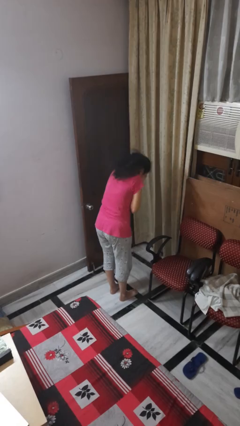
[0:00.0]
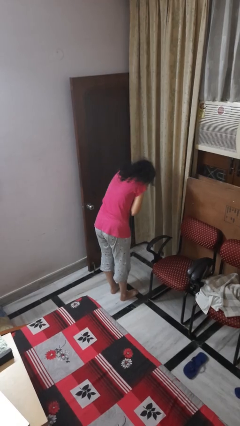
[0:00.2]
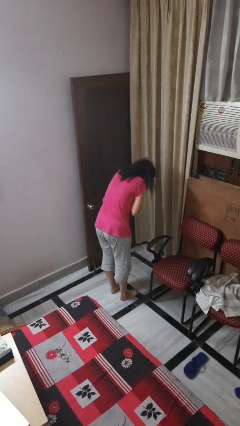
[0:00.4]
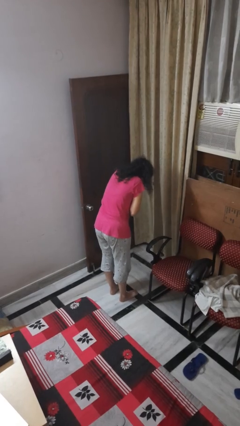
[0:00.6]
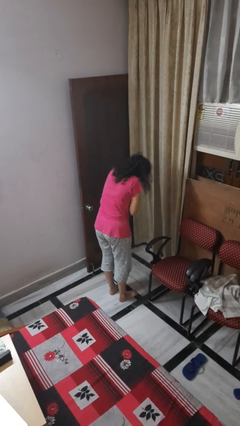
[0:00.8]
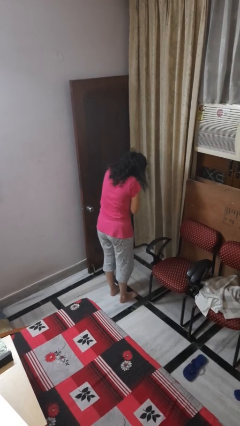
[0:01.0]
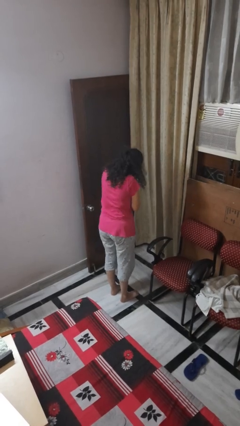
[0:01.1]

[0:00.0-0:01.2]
person sneezes into hand

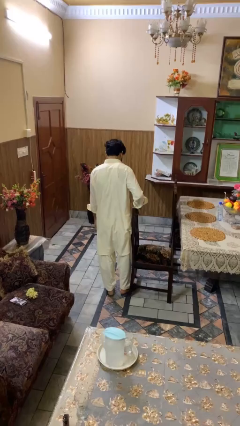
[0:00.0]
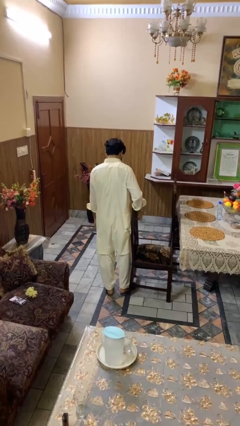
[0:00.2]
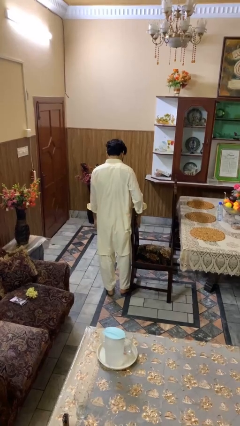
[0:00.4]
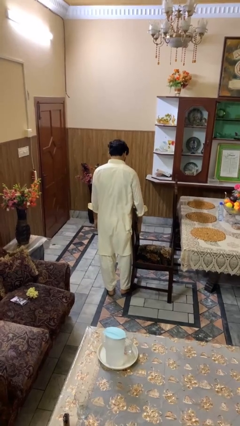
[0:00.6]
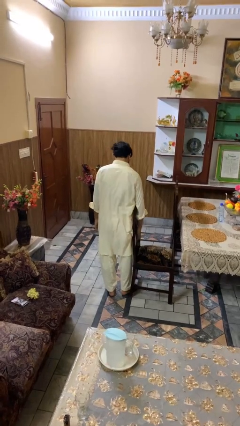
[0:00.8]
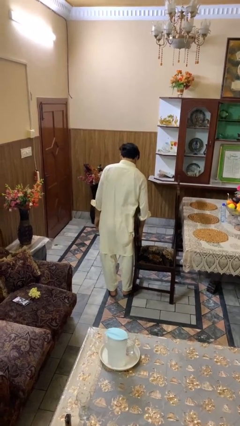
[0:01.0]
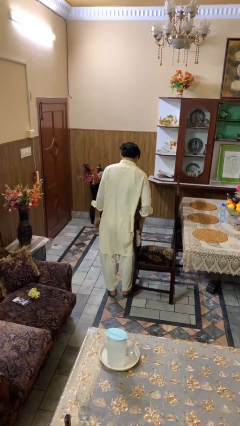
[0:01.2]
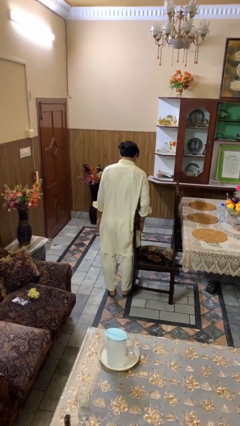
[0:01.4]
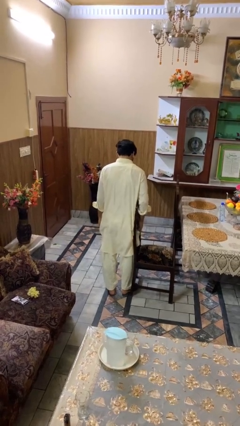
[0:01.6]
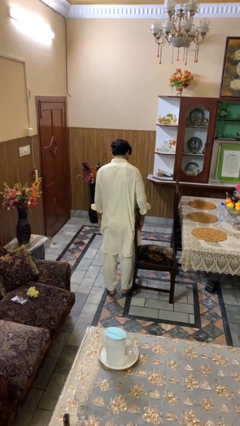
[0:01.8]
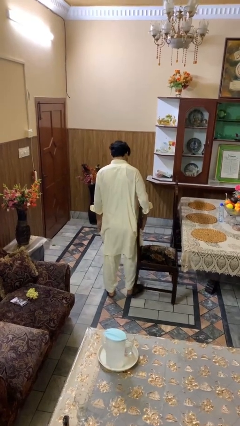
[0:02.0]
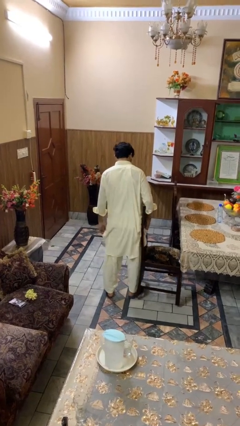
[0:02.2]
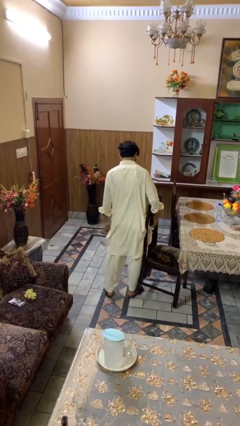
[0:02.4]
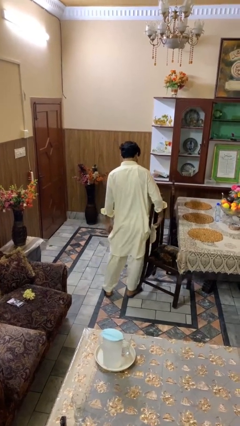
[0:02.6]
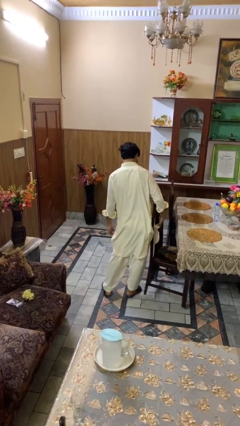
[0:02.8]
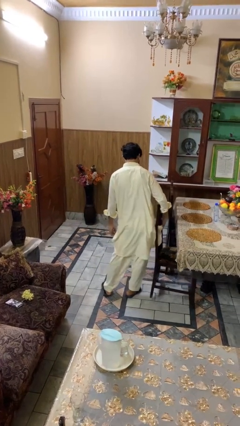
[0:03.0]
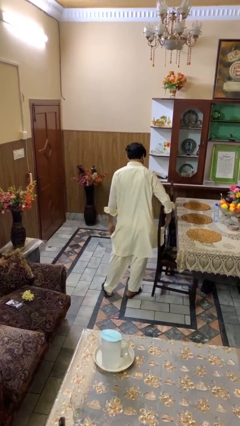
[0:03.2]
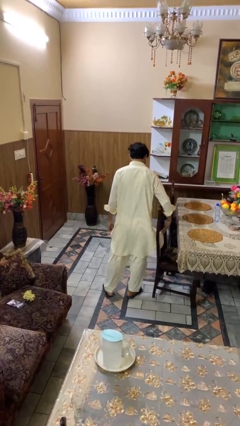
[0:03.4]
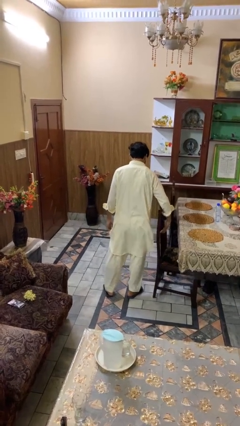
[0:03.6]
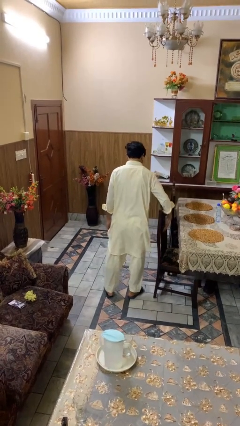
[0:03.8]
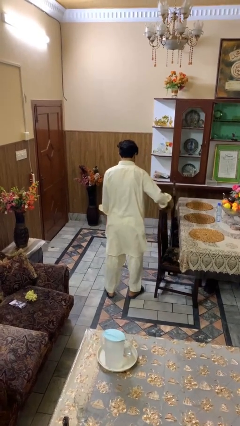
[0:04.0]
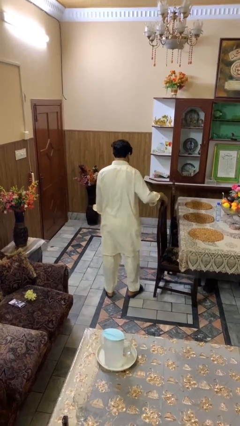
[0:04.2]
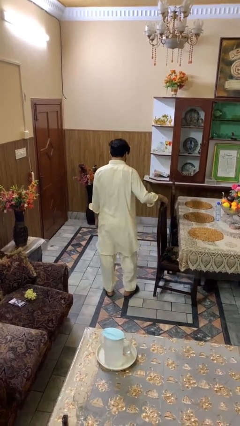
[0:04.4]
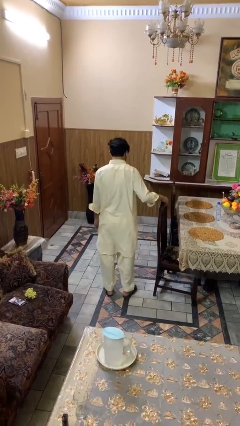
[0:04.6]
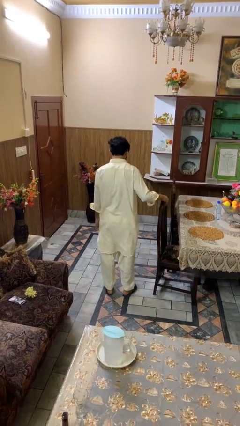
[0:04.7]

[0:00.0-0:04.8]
person pushes in chair

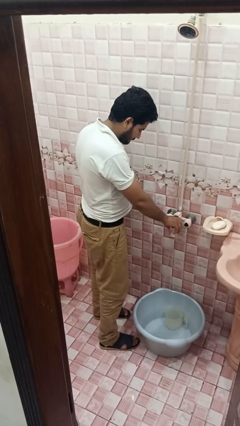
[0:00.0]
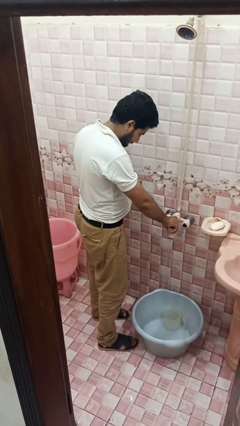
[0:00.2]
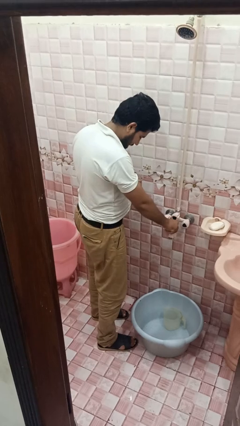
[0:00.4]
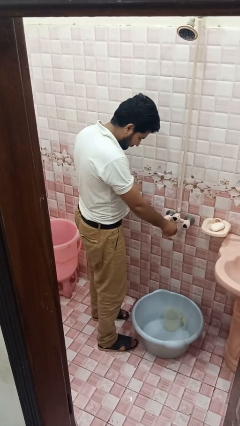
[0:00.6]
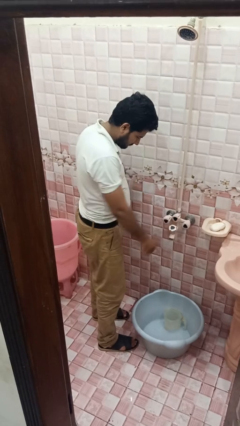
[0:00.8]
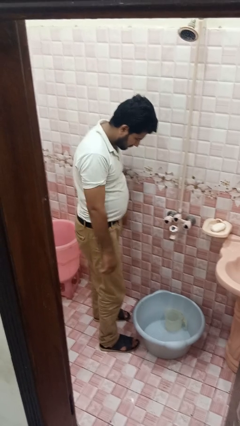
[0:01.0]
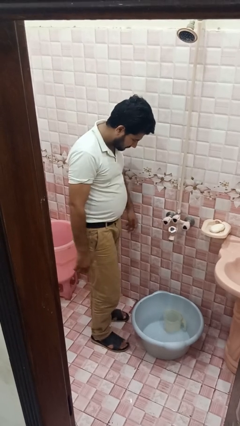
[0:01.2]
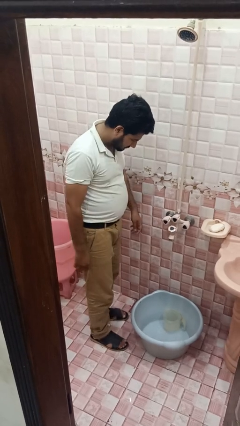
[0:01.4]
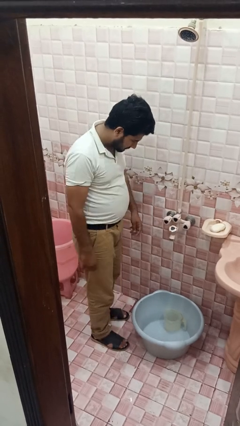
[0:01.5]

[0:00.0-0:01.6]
person turns off faucet

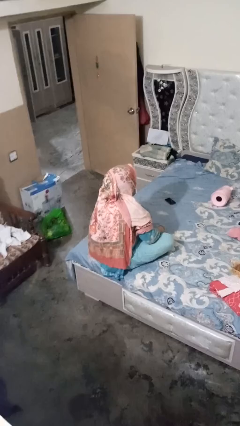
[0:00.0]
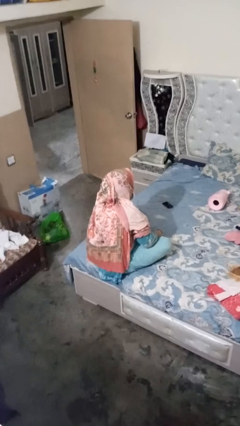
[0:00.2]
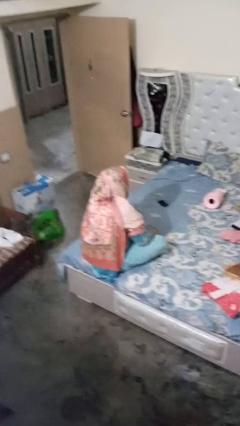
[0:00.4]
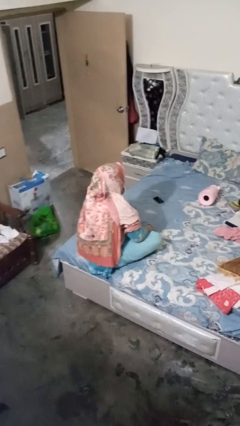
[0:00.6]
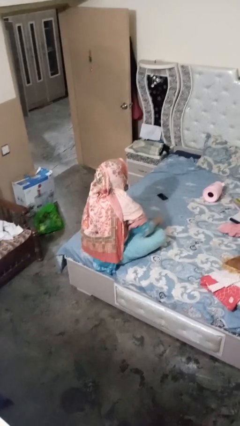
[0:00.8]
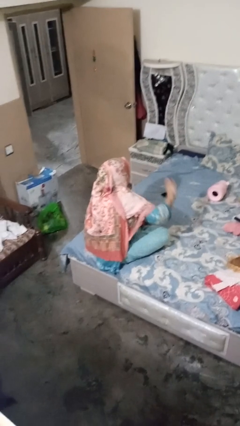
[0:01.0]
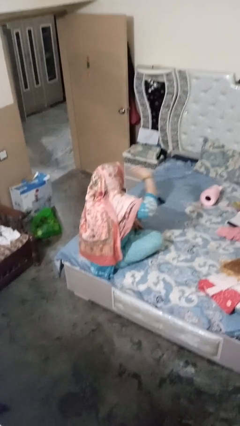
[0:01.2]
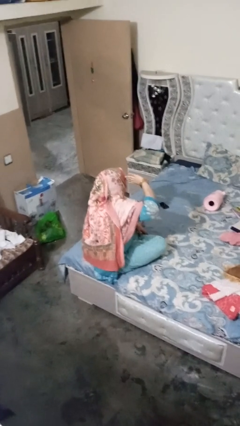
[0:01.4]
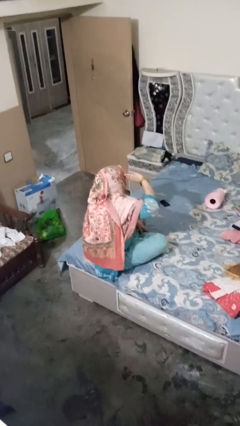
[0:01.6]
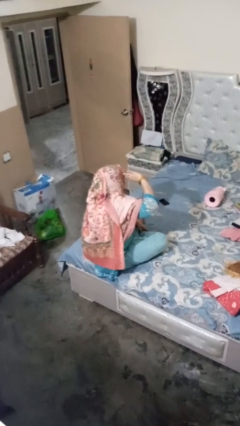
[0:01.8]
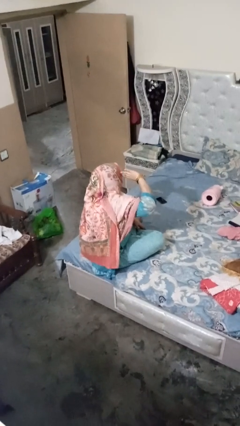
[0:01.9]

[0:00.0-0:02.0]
person salutes

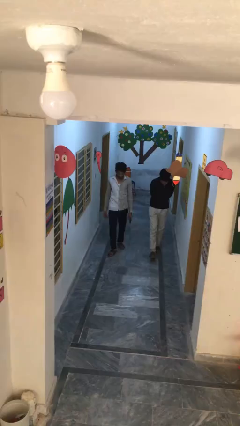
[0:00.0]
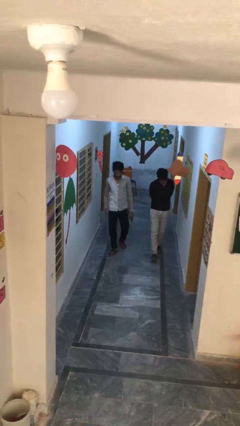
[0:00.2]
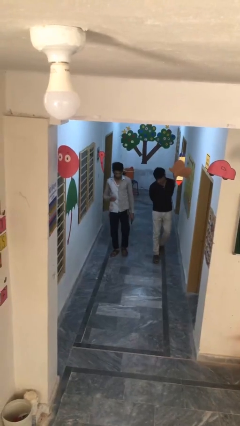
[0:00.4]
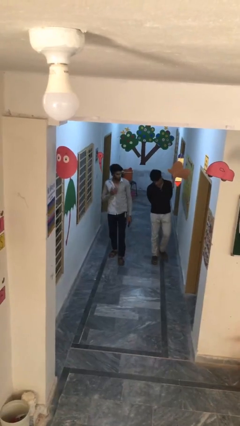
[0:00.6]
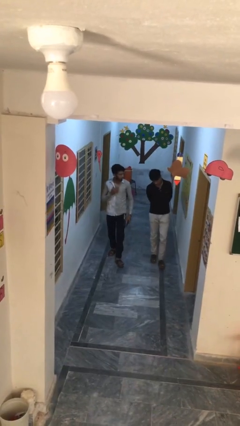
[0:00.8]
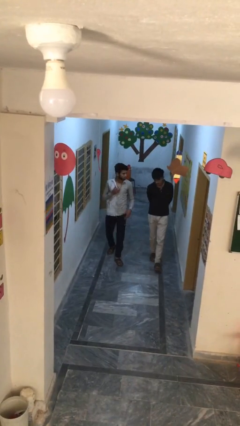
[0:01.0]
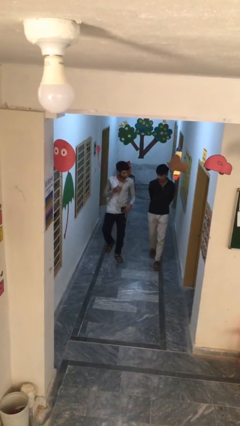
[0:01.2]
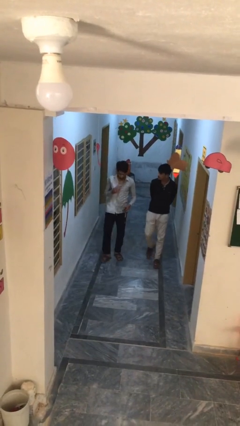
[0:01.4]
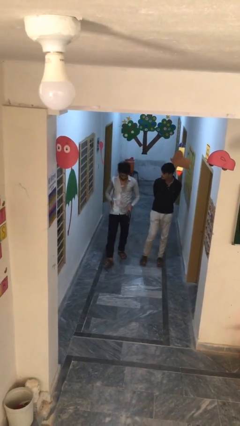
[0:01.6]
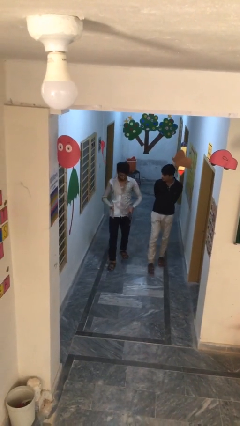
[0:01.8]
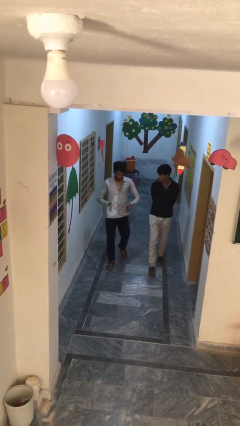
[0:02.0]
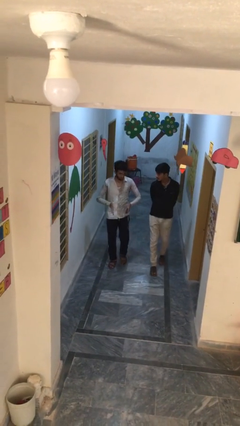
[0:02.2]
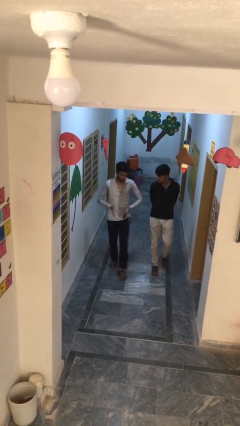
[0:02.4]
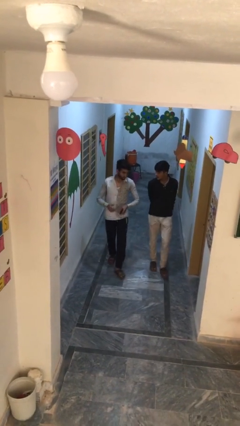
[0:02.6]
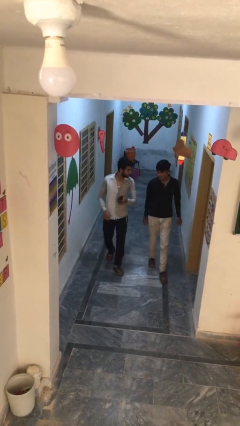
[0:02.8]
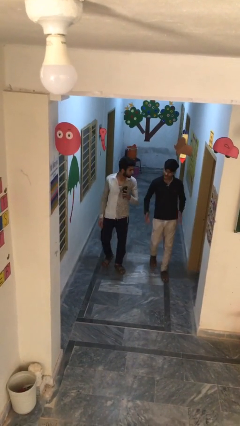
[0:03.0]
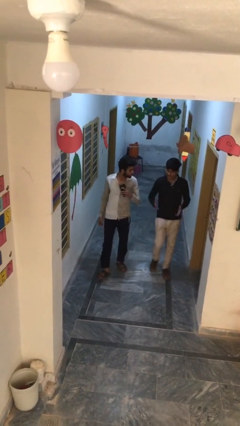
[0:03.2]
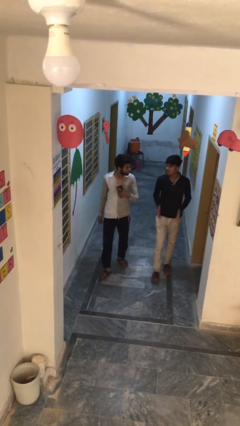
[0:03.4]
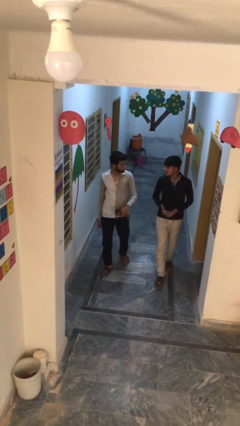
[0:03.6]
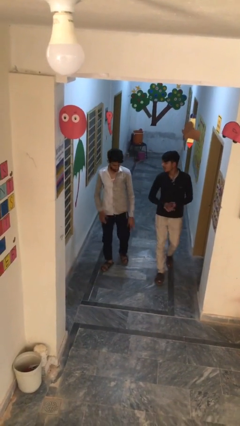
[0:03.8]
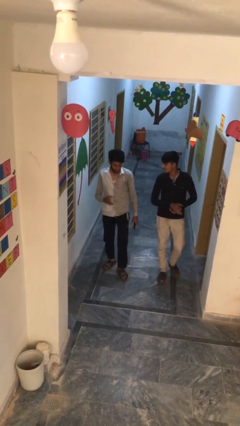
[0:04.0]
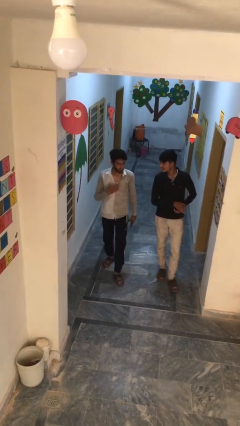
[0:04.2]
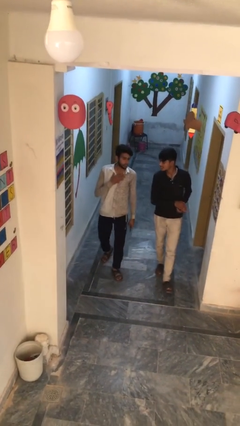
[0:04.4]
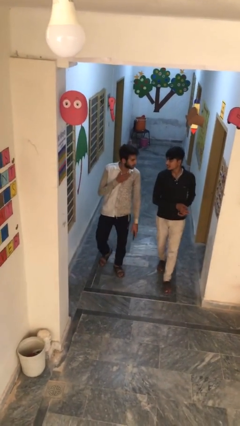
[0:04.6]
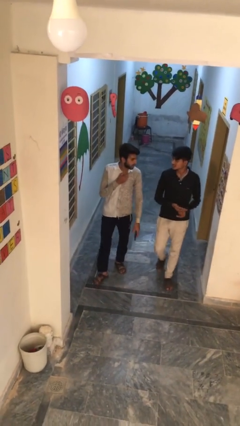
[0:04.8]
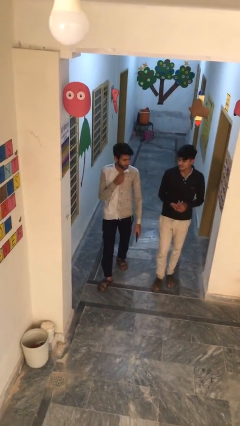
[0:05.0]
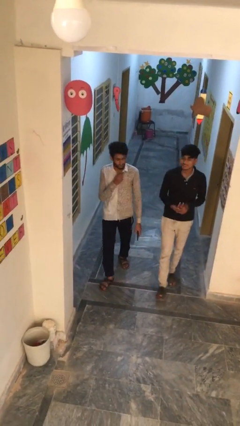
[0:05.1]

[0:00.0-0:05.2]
person talks to person

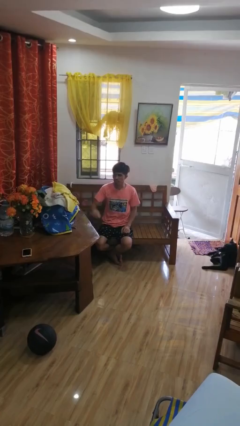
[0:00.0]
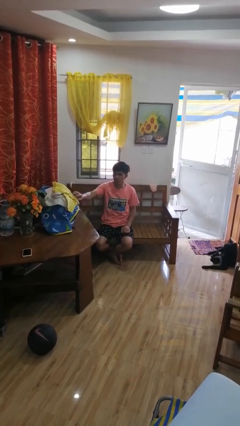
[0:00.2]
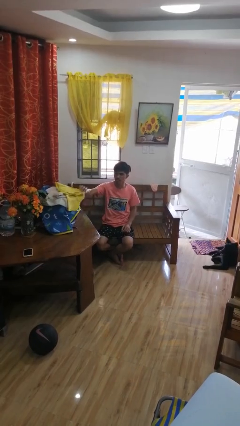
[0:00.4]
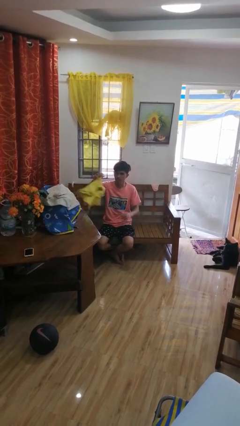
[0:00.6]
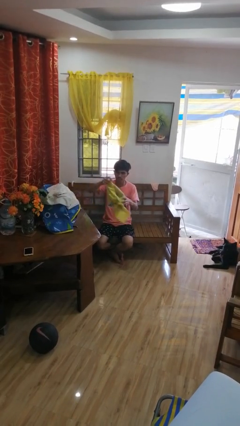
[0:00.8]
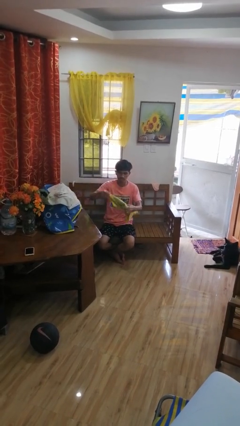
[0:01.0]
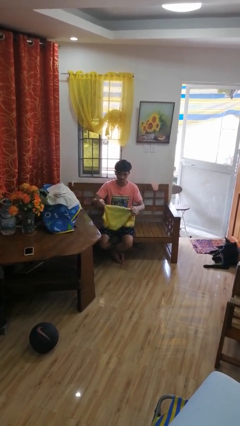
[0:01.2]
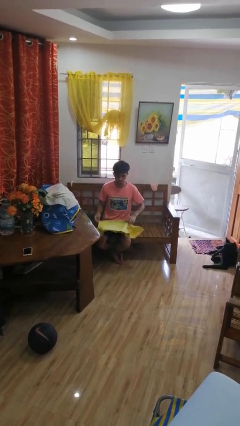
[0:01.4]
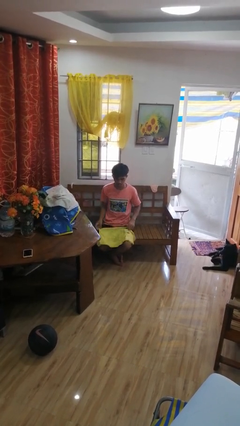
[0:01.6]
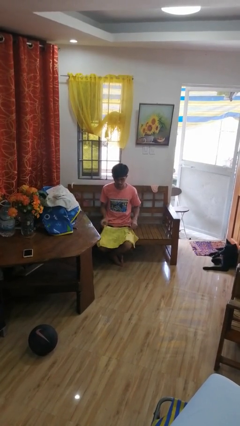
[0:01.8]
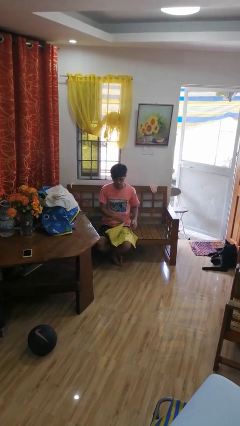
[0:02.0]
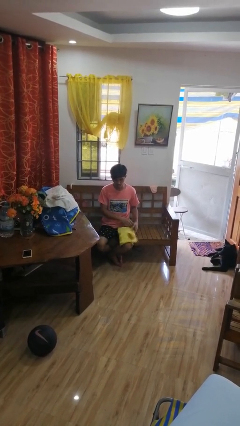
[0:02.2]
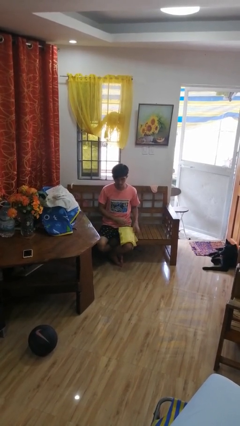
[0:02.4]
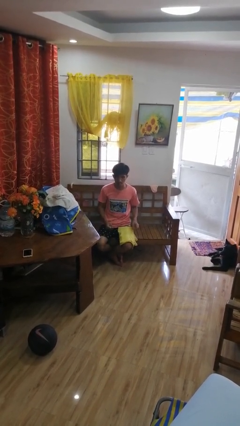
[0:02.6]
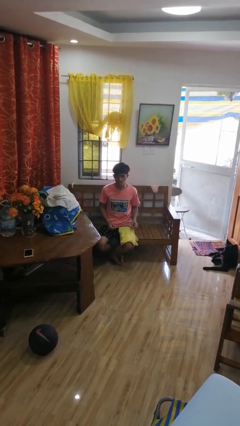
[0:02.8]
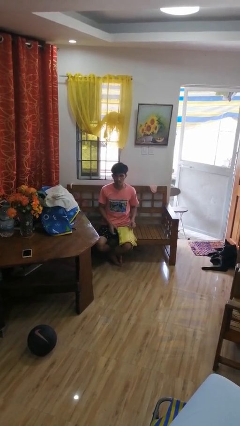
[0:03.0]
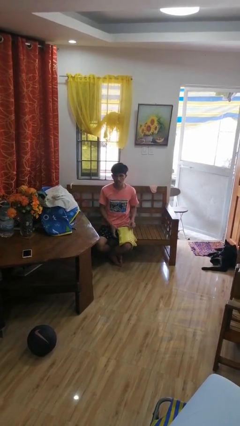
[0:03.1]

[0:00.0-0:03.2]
person folds shirt
